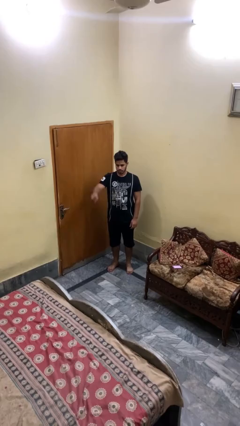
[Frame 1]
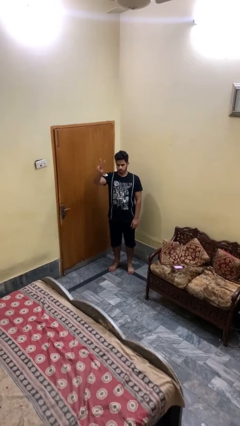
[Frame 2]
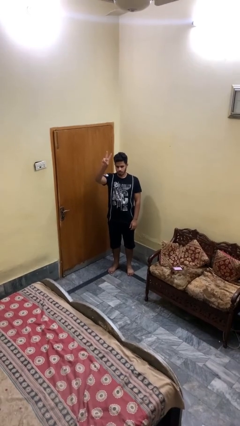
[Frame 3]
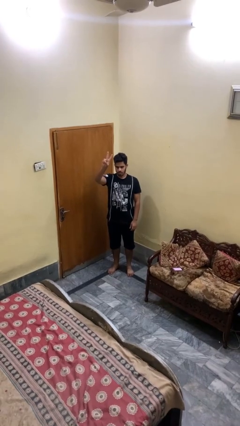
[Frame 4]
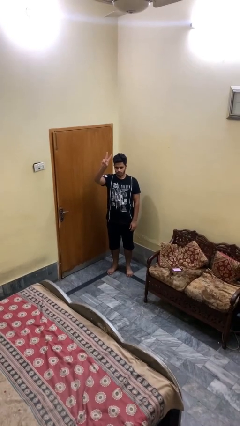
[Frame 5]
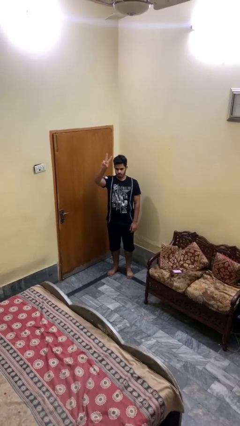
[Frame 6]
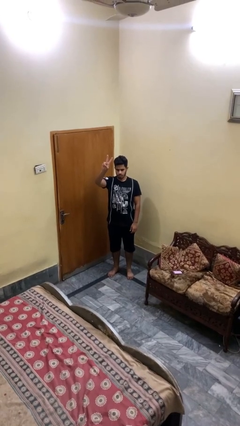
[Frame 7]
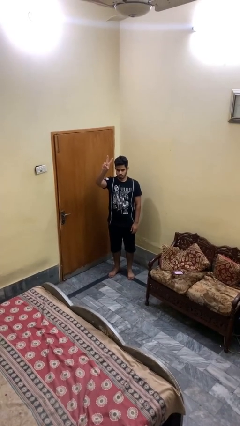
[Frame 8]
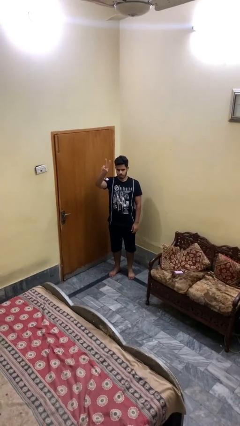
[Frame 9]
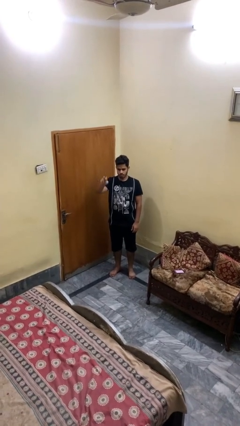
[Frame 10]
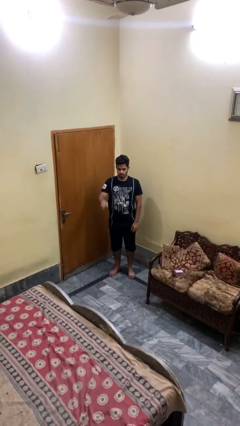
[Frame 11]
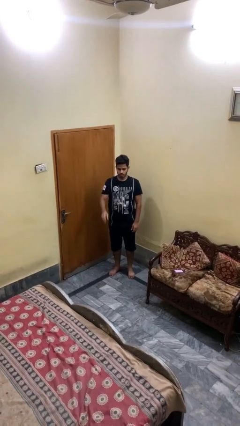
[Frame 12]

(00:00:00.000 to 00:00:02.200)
person gestures peace

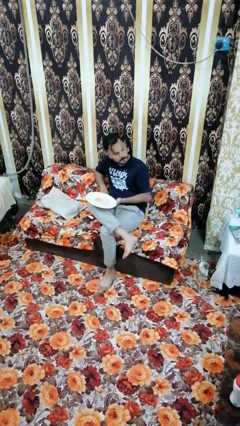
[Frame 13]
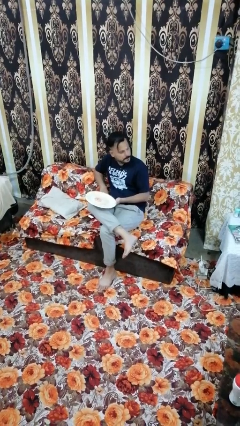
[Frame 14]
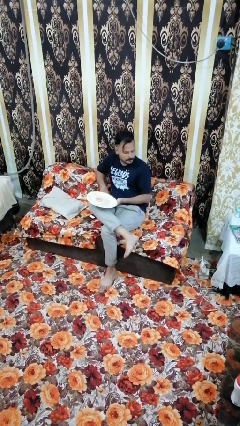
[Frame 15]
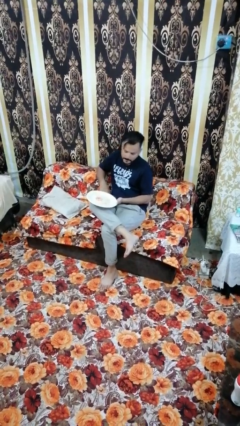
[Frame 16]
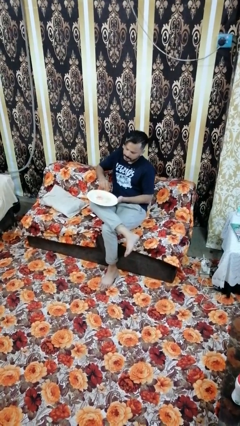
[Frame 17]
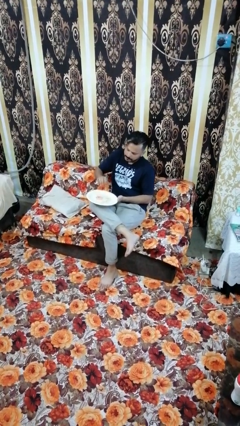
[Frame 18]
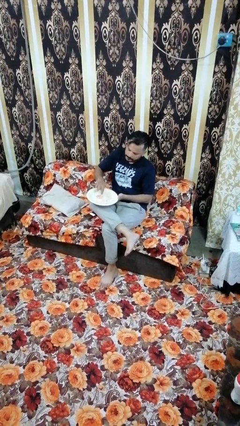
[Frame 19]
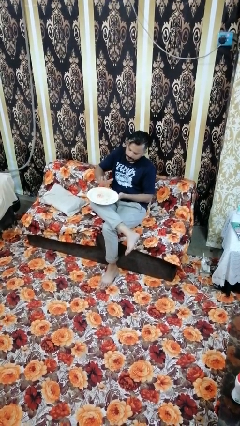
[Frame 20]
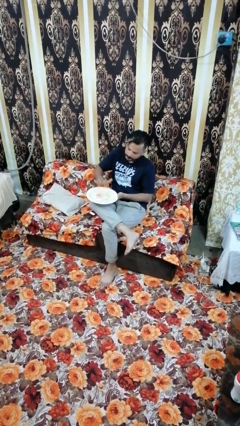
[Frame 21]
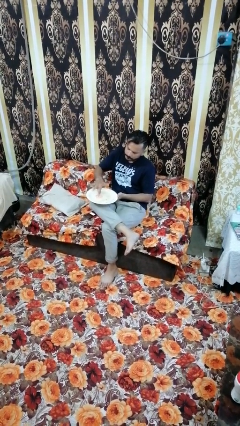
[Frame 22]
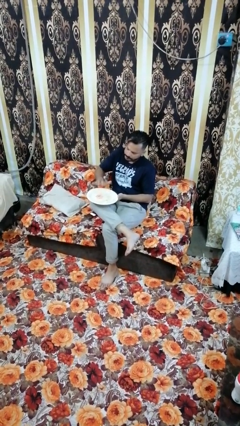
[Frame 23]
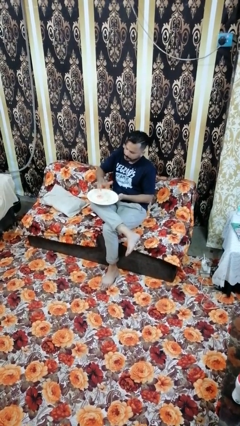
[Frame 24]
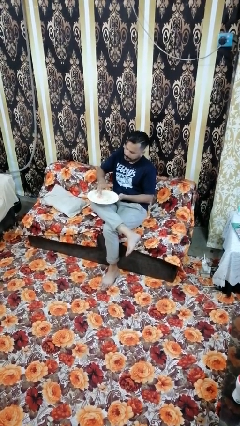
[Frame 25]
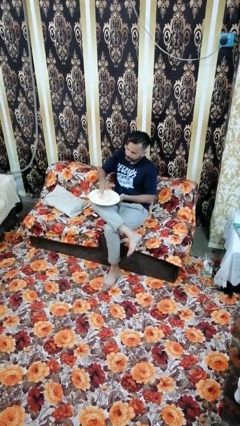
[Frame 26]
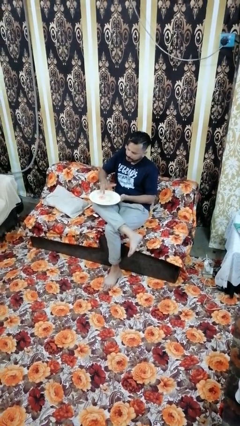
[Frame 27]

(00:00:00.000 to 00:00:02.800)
person taps object with finger

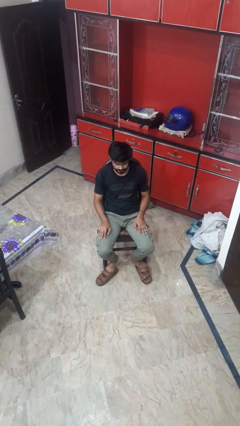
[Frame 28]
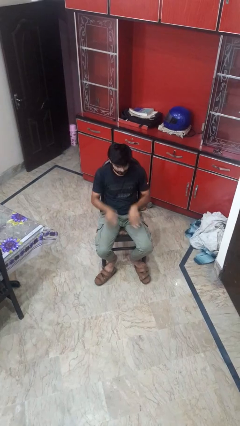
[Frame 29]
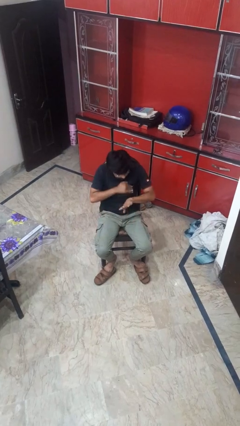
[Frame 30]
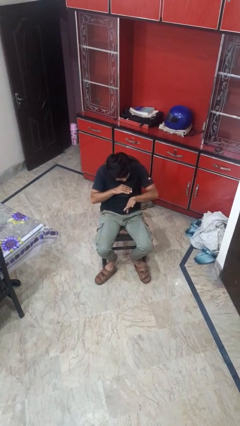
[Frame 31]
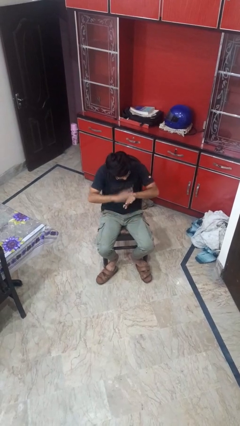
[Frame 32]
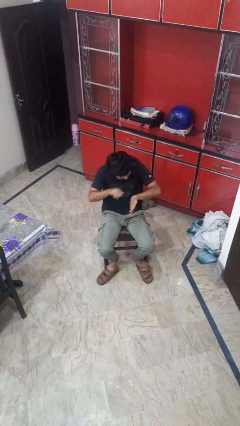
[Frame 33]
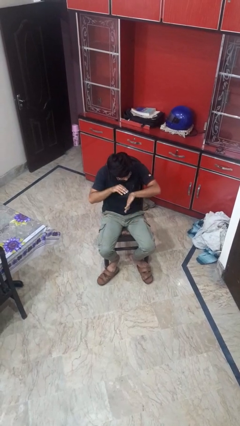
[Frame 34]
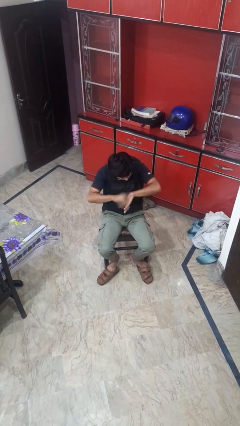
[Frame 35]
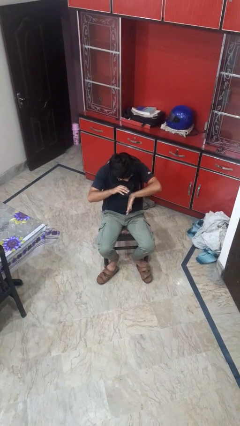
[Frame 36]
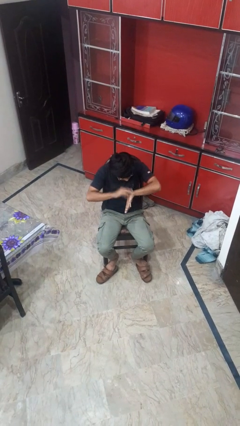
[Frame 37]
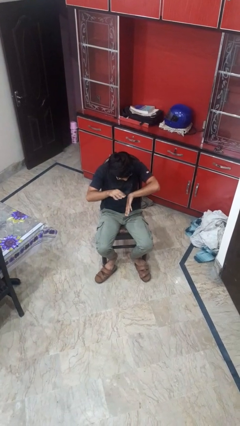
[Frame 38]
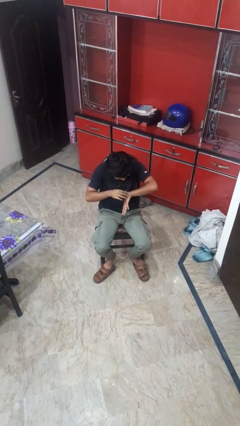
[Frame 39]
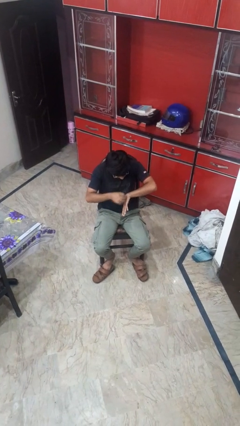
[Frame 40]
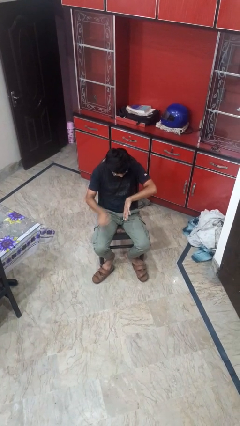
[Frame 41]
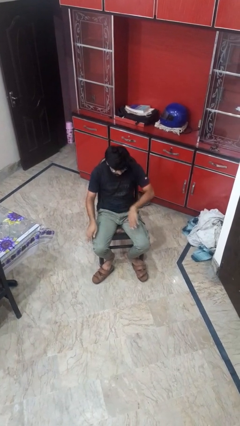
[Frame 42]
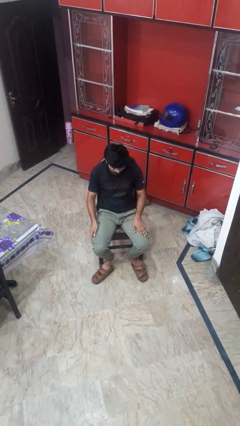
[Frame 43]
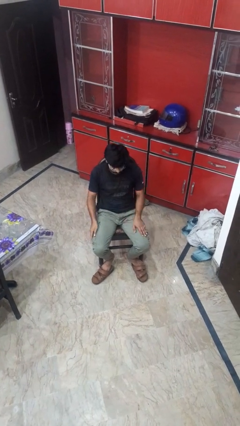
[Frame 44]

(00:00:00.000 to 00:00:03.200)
person swats bug

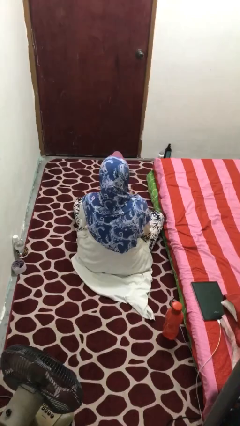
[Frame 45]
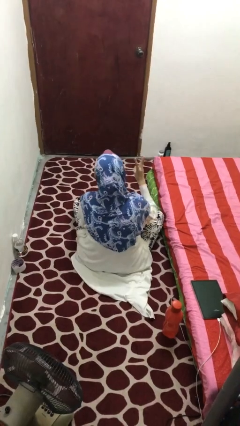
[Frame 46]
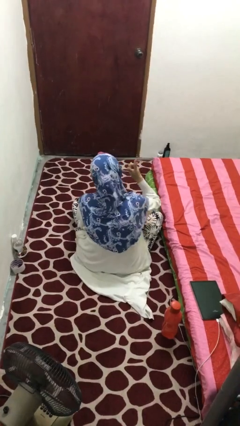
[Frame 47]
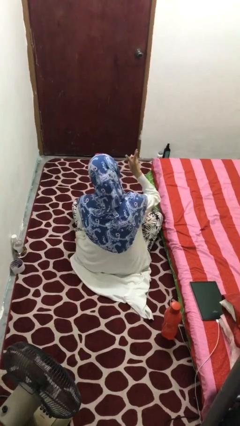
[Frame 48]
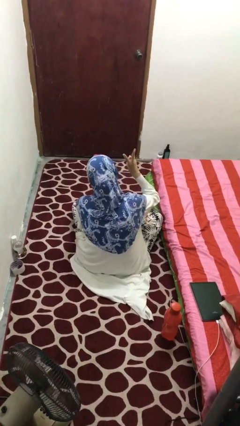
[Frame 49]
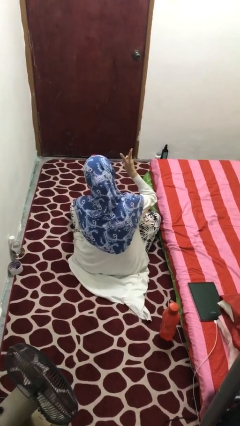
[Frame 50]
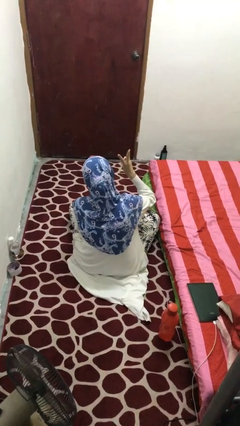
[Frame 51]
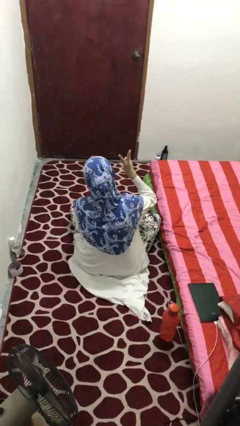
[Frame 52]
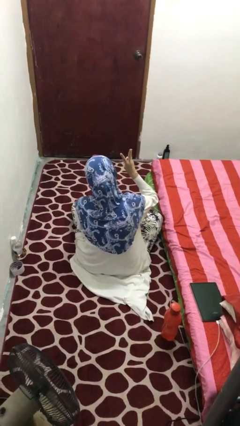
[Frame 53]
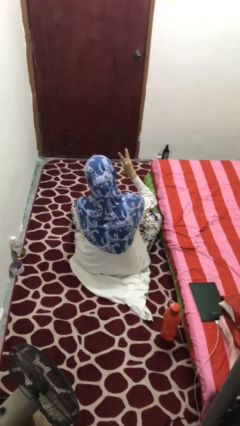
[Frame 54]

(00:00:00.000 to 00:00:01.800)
person gestures number three

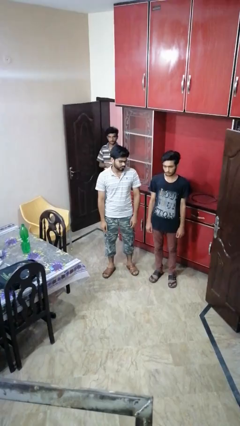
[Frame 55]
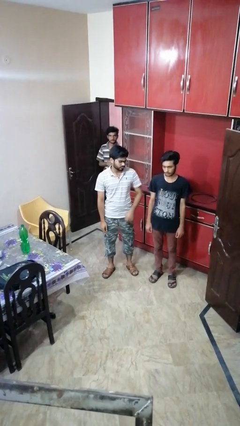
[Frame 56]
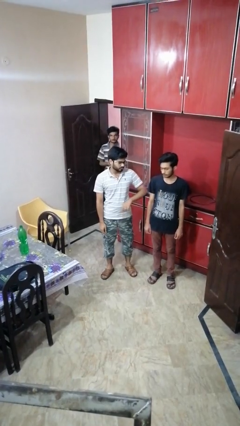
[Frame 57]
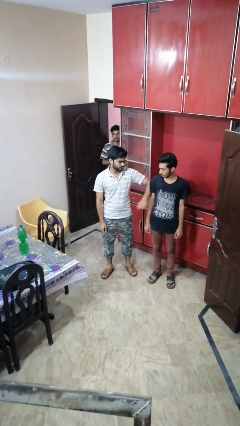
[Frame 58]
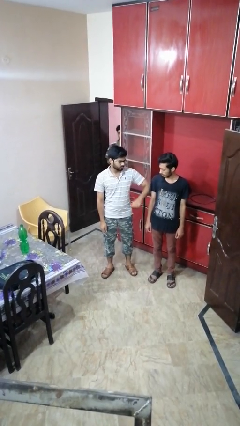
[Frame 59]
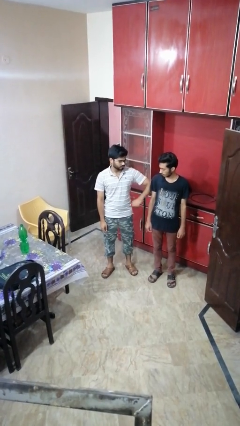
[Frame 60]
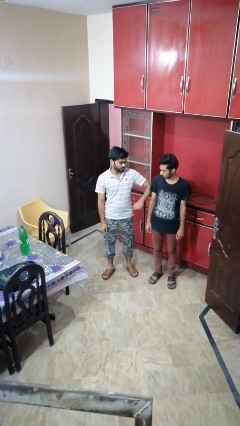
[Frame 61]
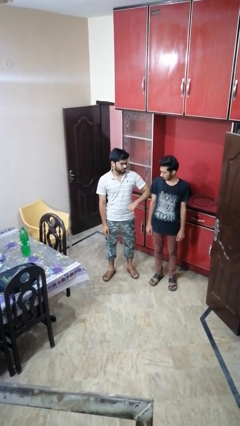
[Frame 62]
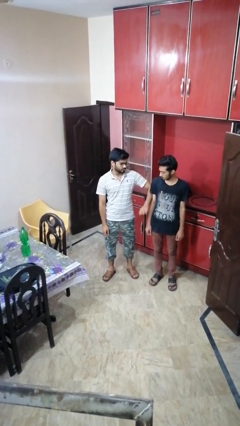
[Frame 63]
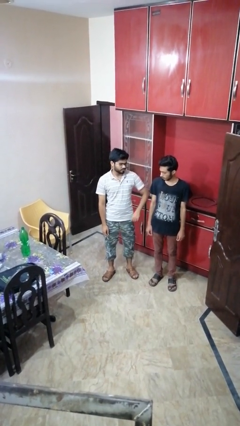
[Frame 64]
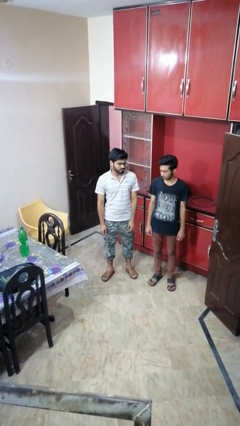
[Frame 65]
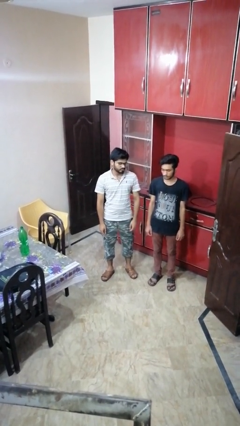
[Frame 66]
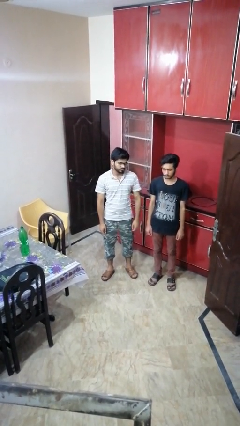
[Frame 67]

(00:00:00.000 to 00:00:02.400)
person nudges person with elbow

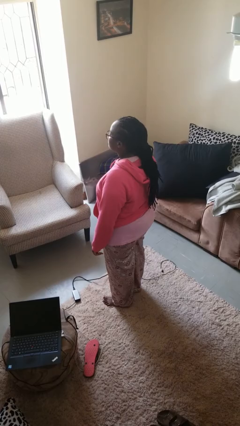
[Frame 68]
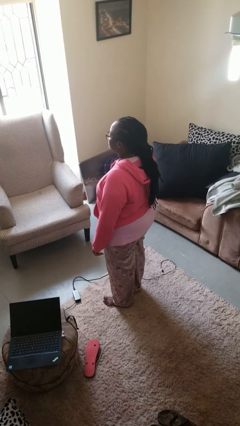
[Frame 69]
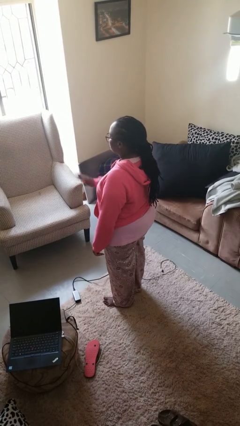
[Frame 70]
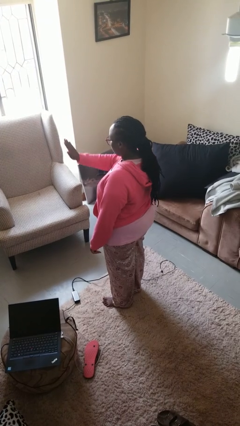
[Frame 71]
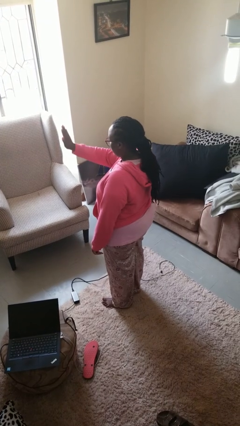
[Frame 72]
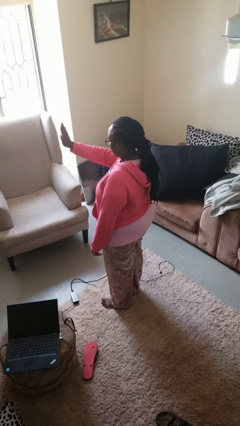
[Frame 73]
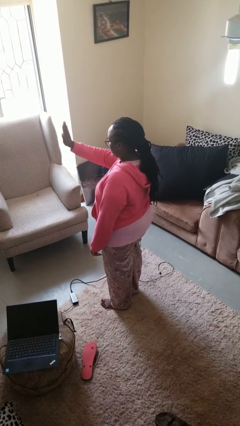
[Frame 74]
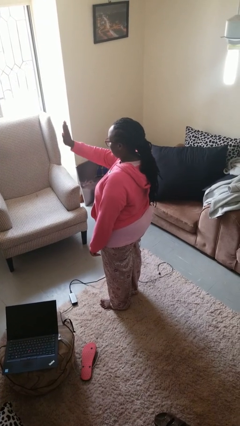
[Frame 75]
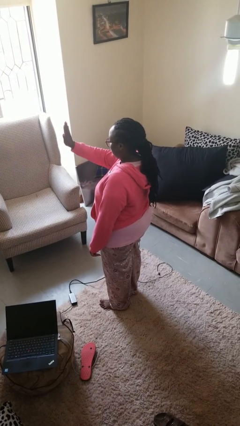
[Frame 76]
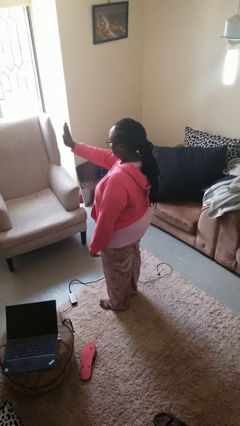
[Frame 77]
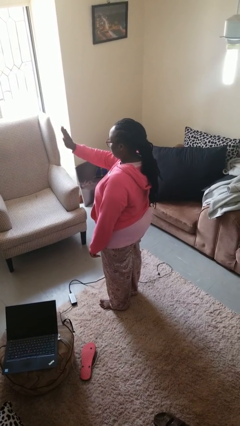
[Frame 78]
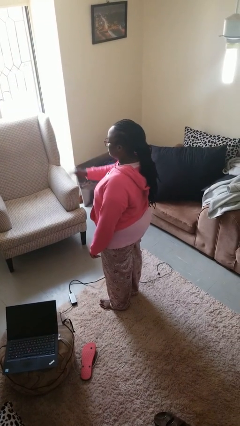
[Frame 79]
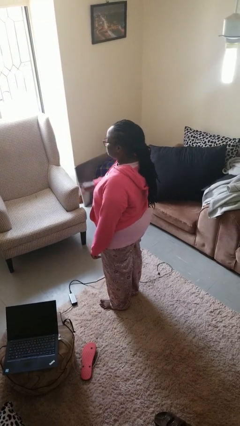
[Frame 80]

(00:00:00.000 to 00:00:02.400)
person gestures stop

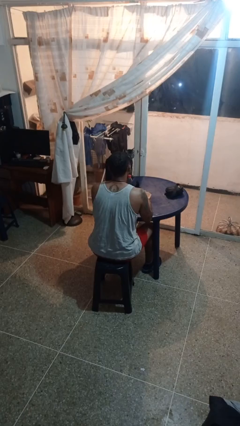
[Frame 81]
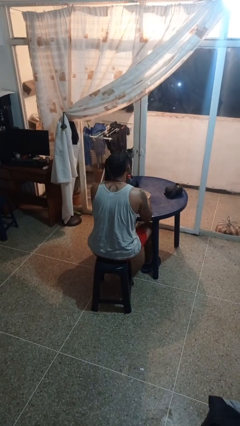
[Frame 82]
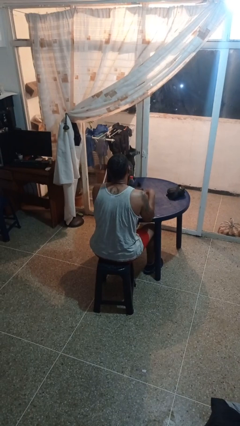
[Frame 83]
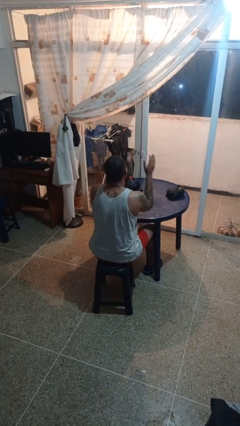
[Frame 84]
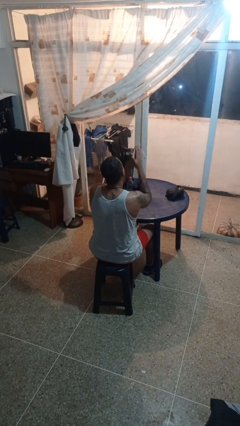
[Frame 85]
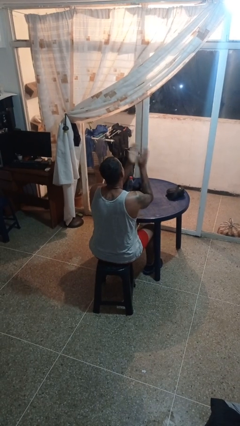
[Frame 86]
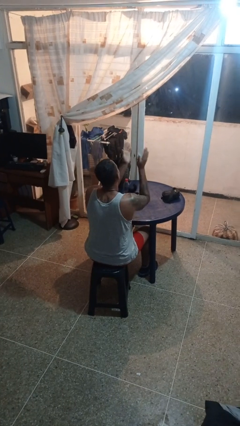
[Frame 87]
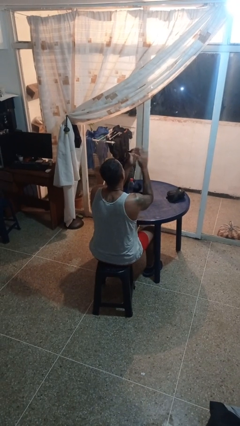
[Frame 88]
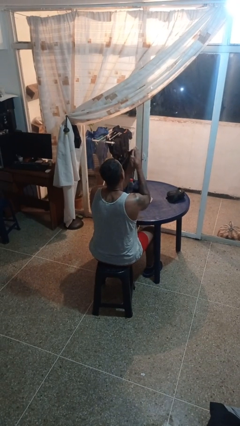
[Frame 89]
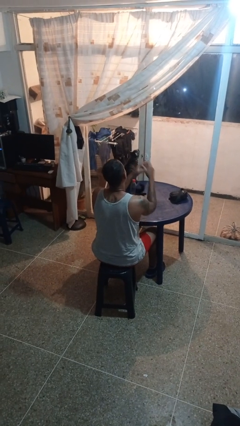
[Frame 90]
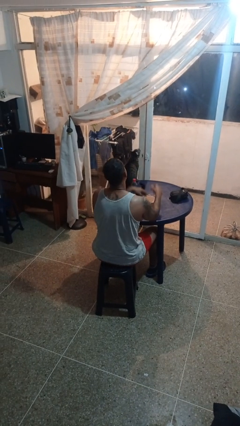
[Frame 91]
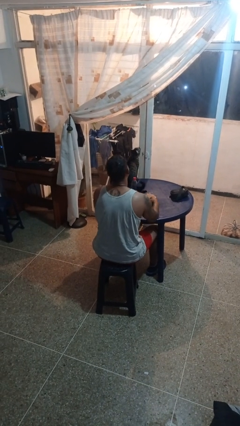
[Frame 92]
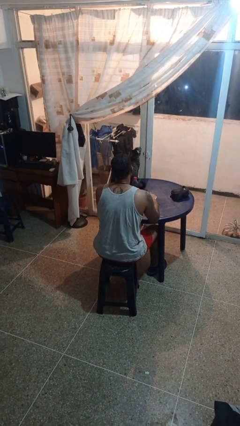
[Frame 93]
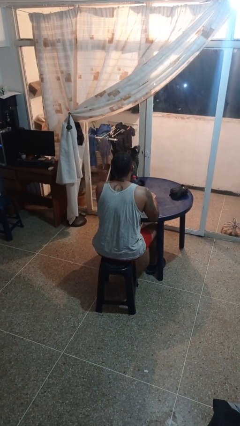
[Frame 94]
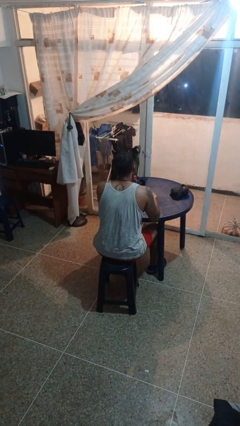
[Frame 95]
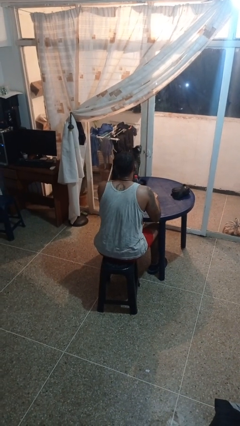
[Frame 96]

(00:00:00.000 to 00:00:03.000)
person claps hands
